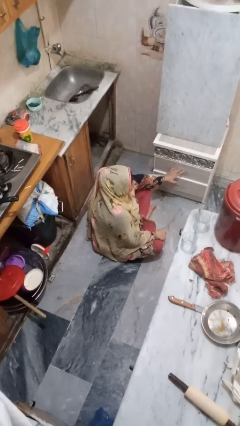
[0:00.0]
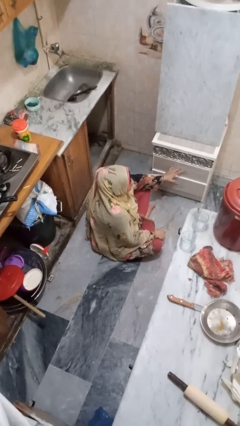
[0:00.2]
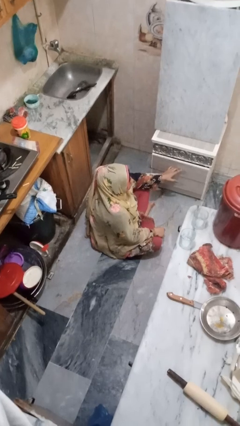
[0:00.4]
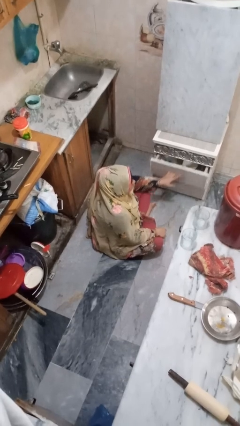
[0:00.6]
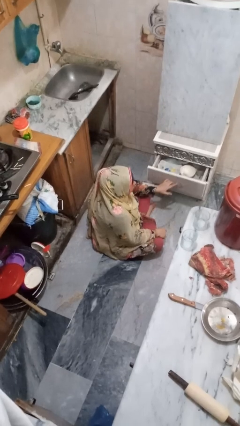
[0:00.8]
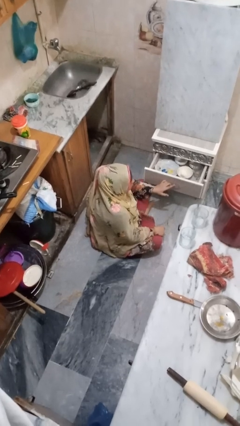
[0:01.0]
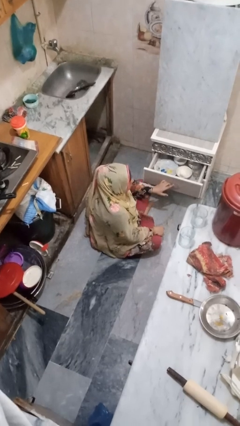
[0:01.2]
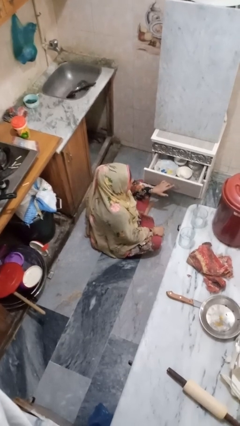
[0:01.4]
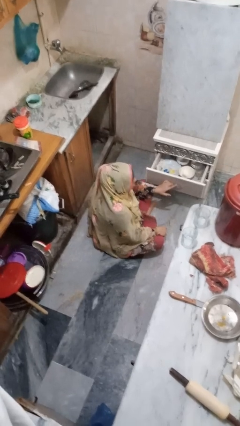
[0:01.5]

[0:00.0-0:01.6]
person opens kitchen drawer

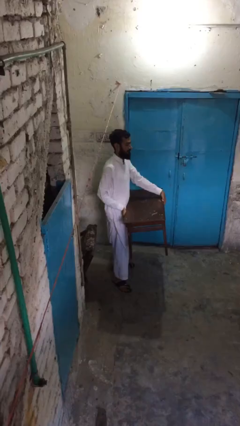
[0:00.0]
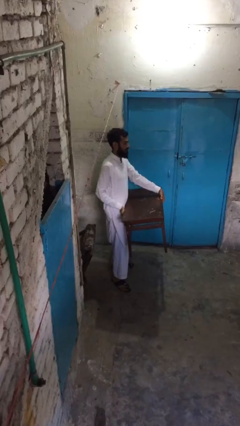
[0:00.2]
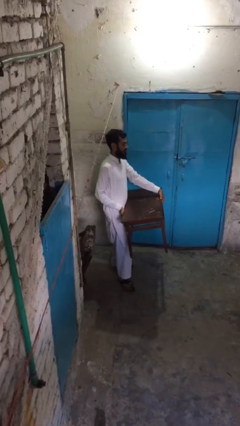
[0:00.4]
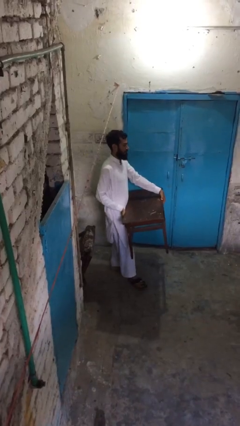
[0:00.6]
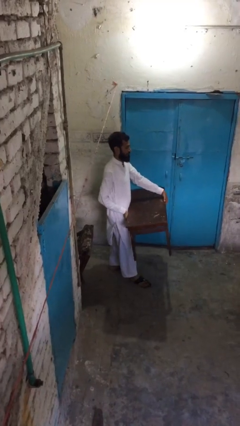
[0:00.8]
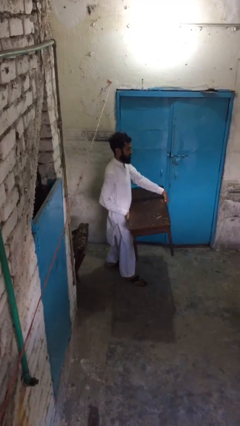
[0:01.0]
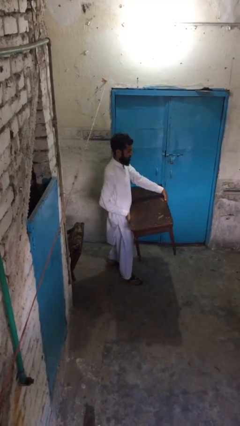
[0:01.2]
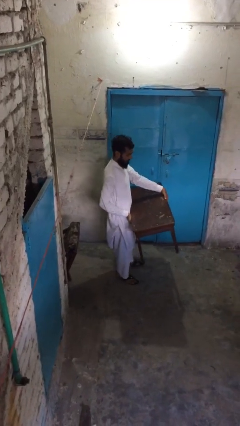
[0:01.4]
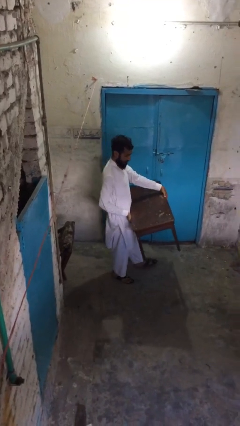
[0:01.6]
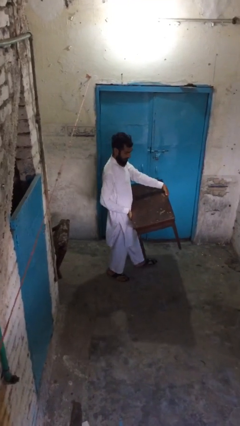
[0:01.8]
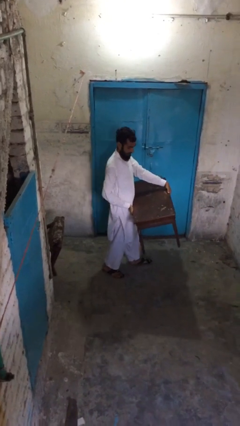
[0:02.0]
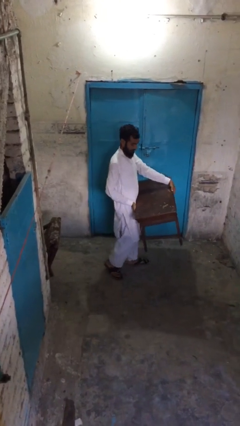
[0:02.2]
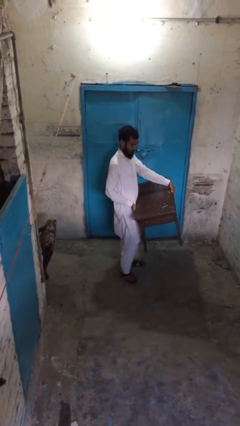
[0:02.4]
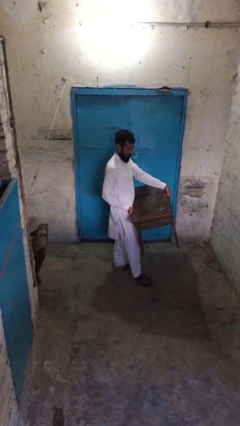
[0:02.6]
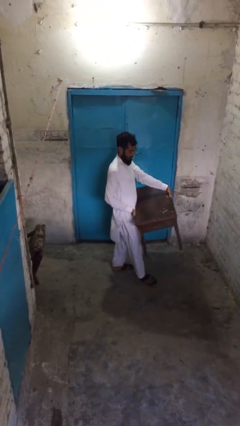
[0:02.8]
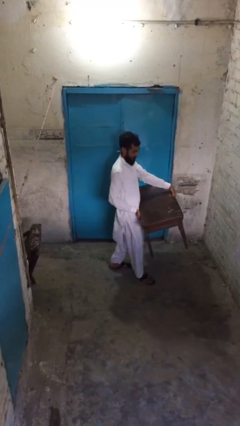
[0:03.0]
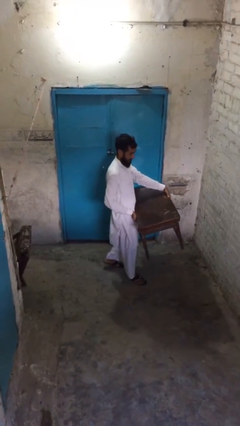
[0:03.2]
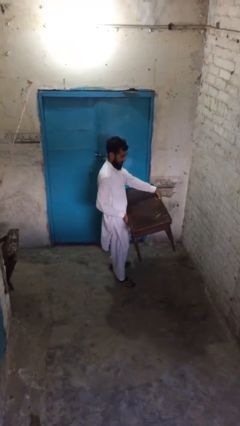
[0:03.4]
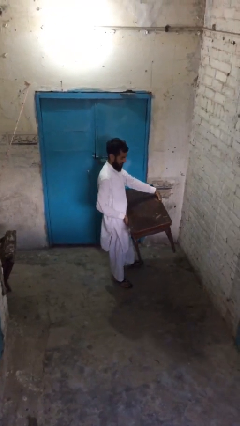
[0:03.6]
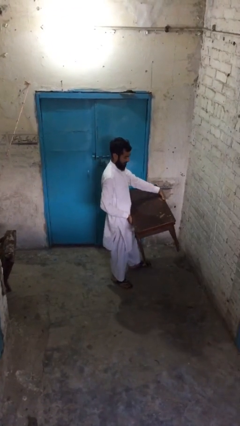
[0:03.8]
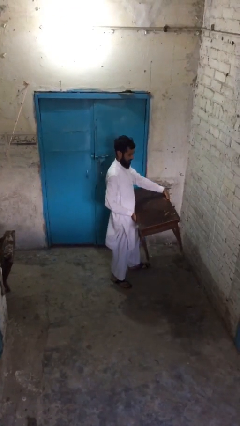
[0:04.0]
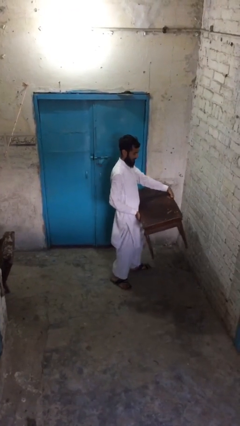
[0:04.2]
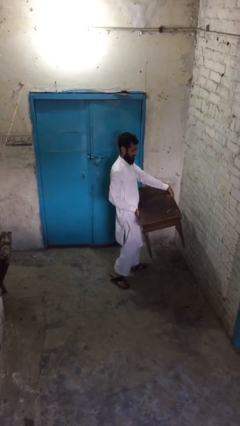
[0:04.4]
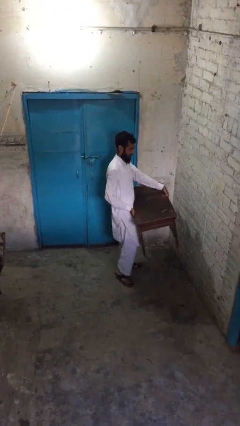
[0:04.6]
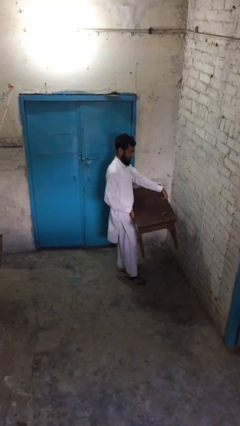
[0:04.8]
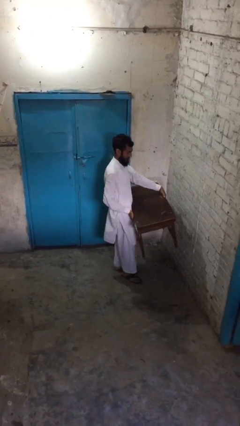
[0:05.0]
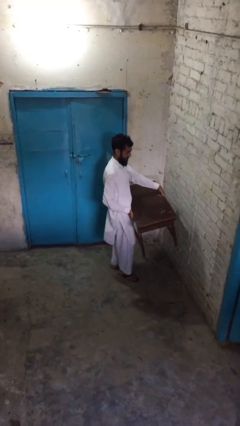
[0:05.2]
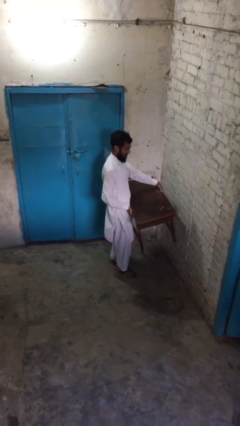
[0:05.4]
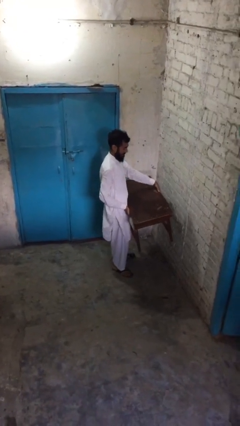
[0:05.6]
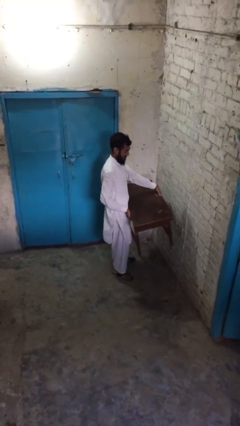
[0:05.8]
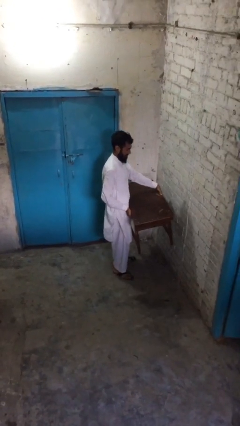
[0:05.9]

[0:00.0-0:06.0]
person carries heavy object

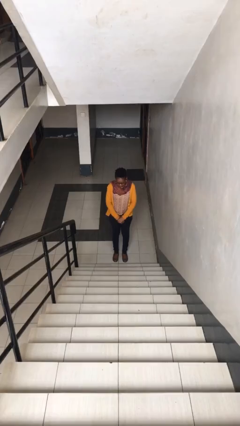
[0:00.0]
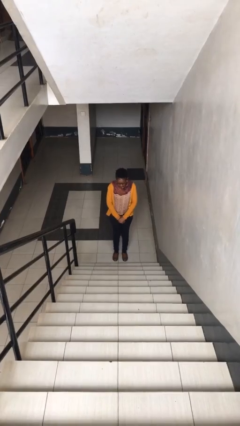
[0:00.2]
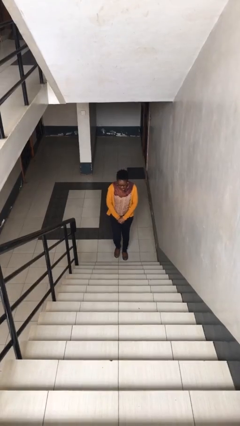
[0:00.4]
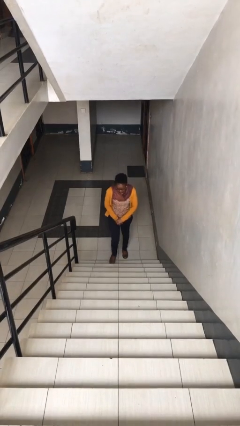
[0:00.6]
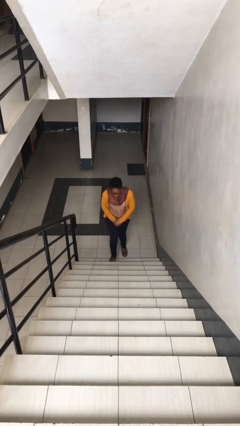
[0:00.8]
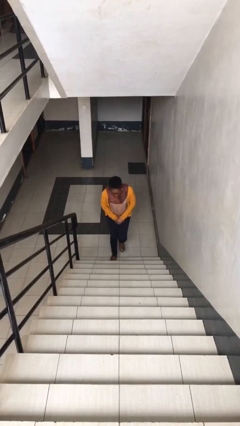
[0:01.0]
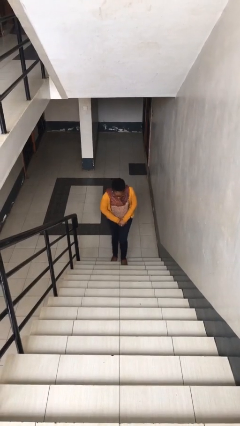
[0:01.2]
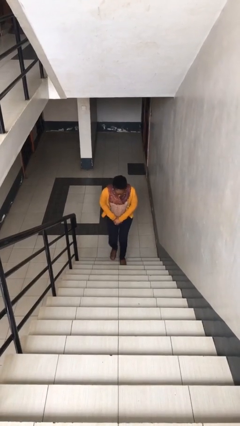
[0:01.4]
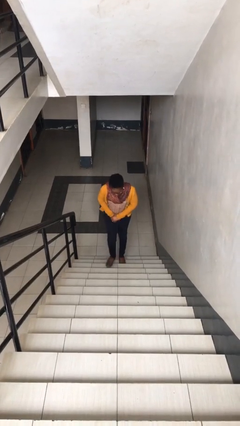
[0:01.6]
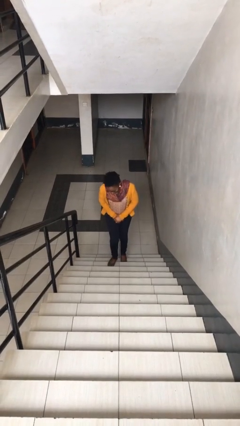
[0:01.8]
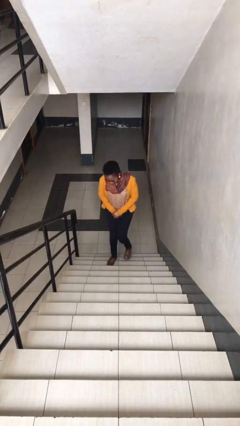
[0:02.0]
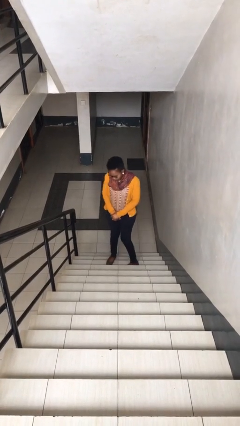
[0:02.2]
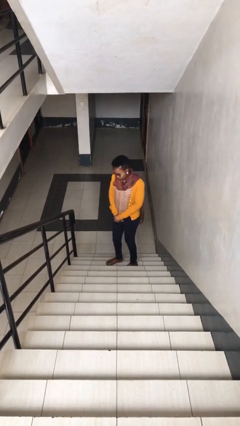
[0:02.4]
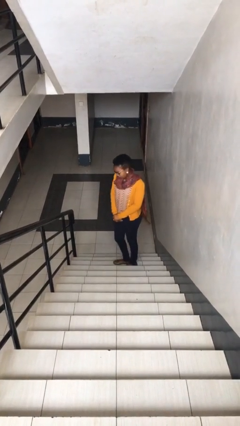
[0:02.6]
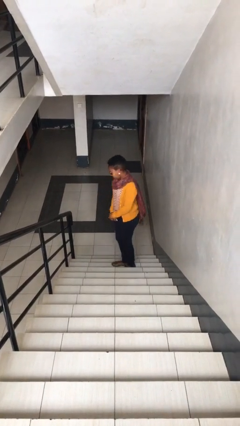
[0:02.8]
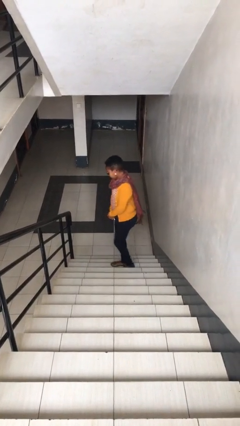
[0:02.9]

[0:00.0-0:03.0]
person climbs up stairs

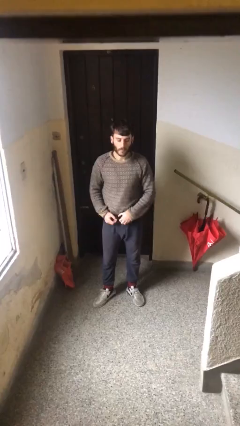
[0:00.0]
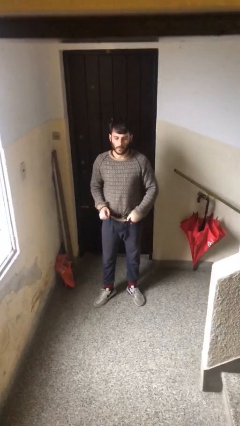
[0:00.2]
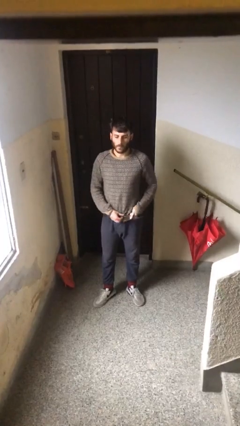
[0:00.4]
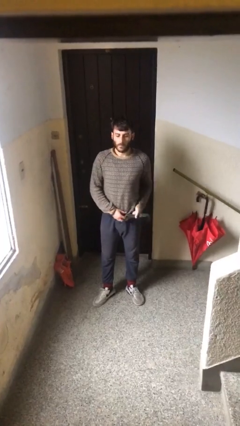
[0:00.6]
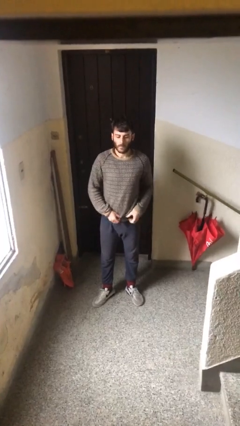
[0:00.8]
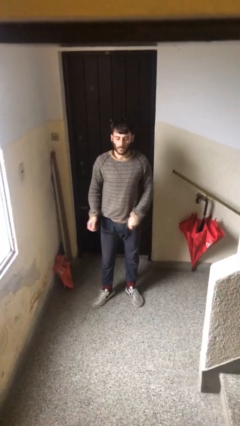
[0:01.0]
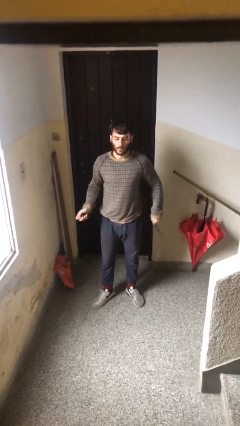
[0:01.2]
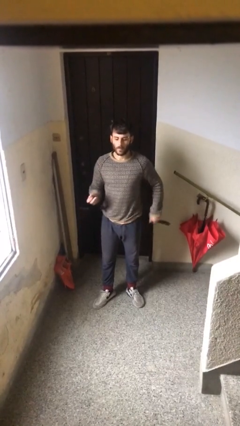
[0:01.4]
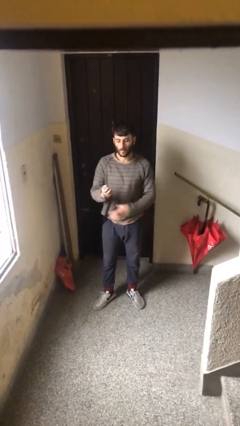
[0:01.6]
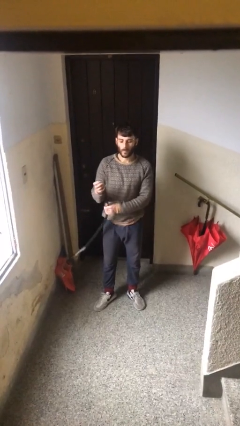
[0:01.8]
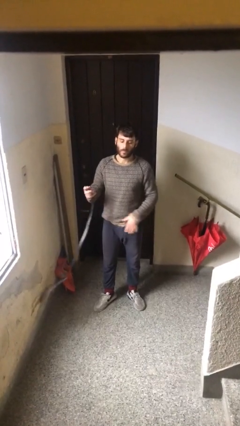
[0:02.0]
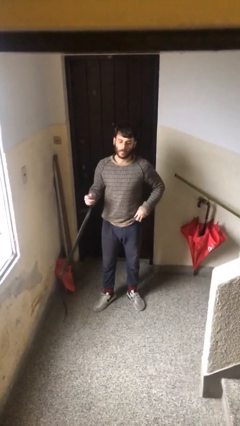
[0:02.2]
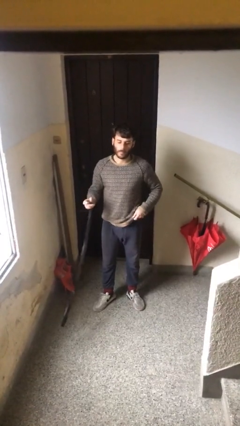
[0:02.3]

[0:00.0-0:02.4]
person takes off belt

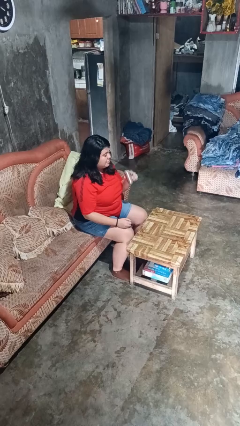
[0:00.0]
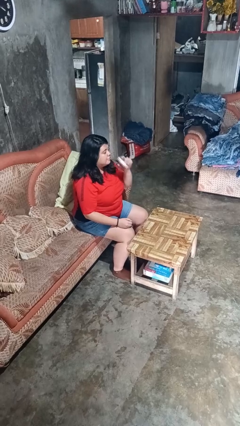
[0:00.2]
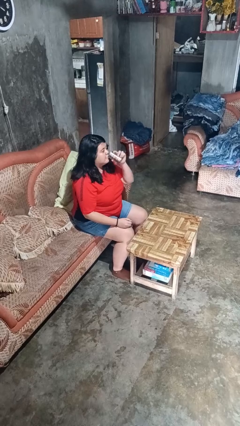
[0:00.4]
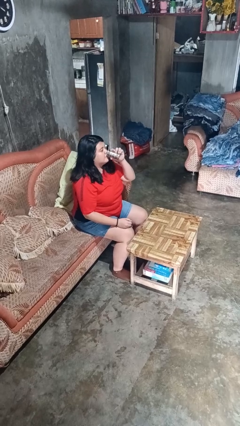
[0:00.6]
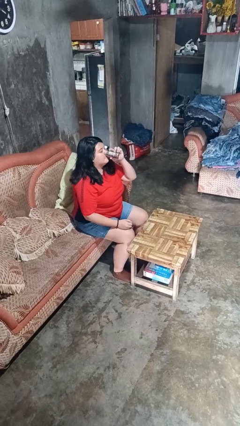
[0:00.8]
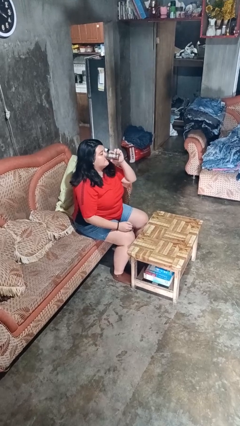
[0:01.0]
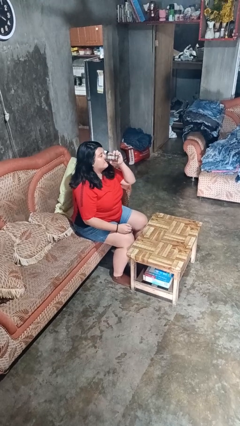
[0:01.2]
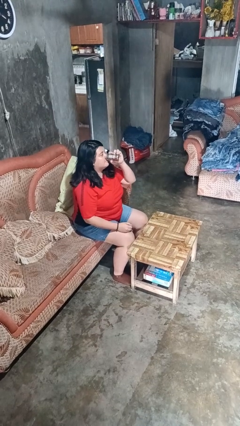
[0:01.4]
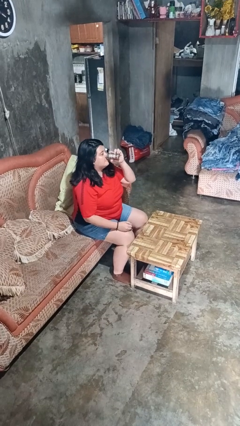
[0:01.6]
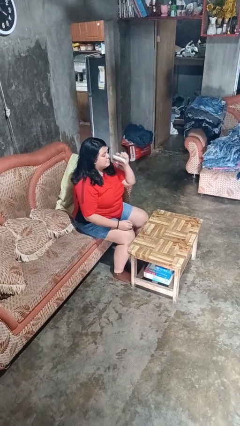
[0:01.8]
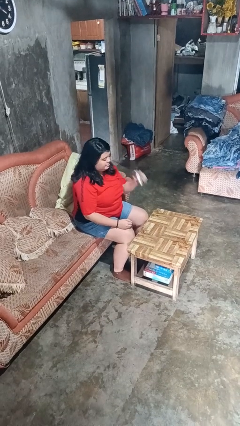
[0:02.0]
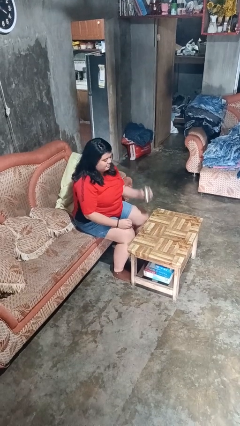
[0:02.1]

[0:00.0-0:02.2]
person drinks from beverage can

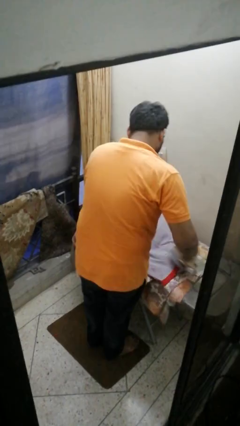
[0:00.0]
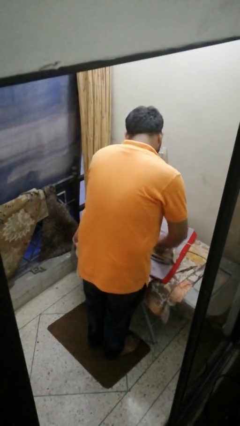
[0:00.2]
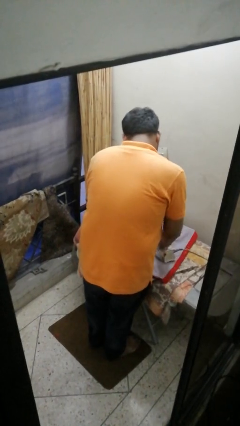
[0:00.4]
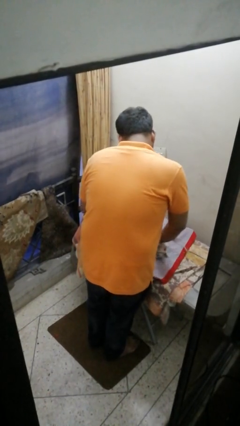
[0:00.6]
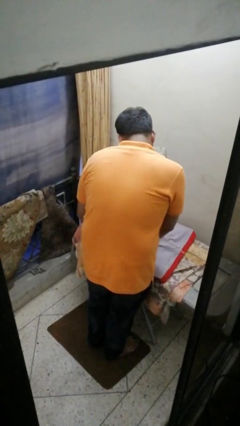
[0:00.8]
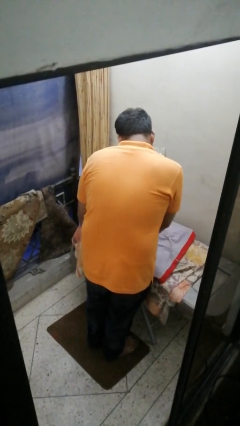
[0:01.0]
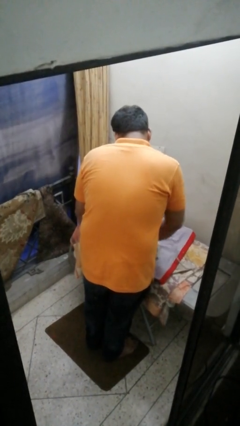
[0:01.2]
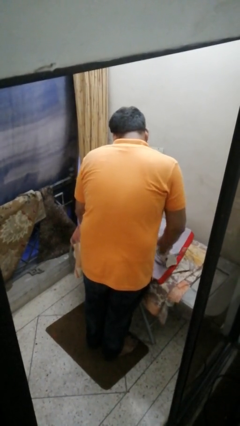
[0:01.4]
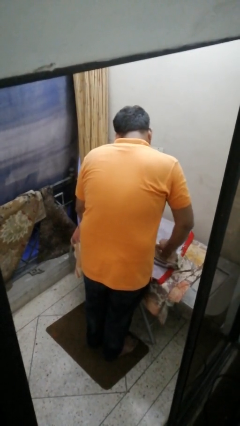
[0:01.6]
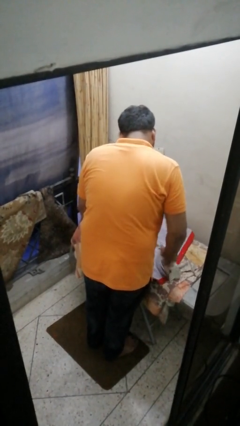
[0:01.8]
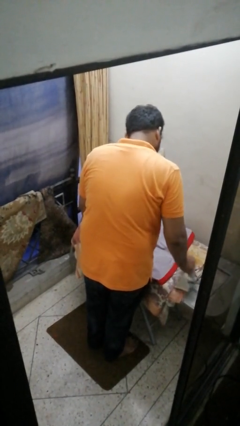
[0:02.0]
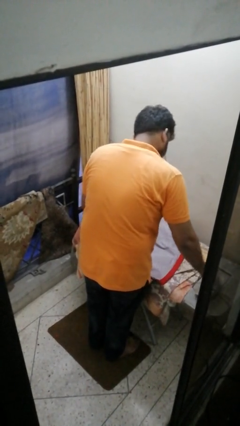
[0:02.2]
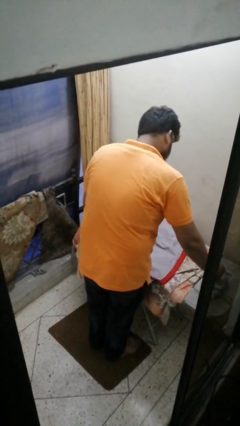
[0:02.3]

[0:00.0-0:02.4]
person irons clothes
